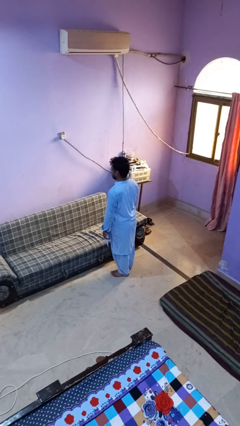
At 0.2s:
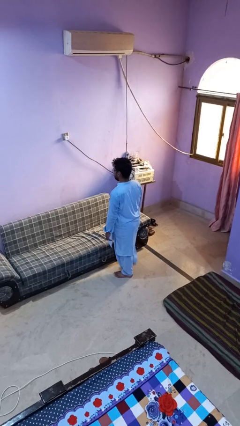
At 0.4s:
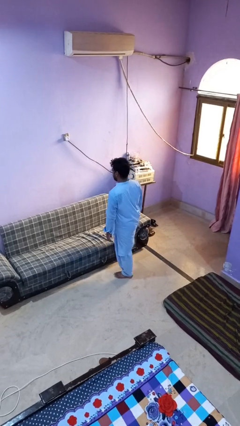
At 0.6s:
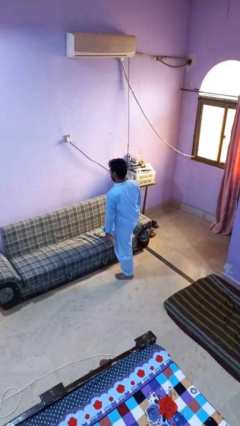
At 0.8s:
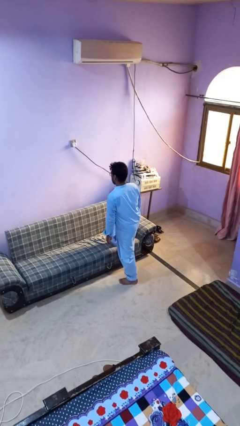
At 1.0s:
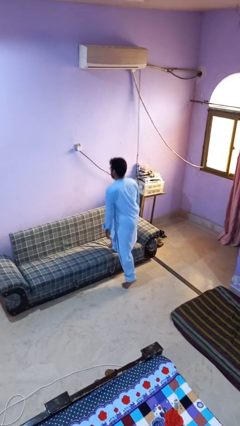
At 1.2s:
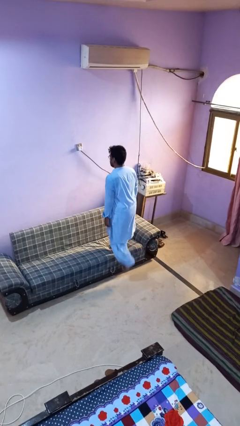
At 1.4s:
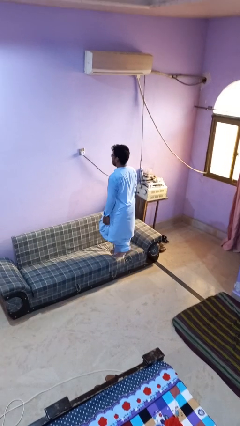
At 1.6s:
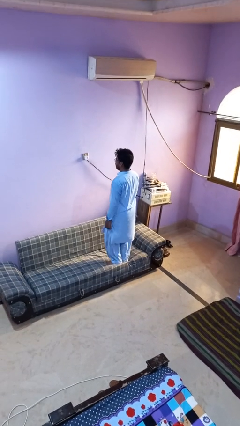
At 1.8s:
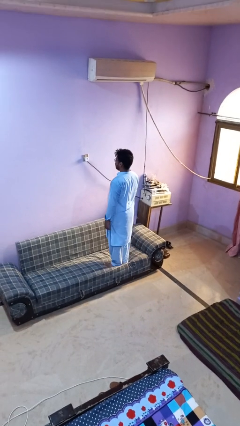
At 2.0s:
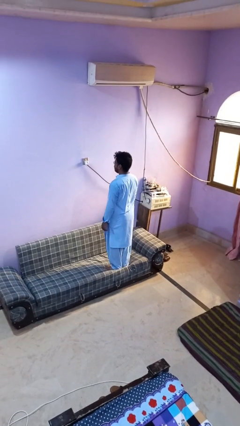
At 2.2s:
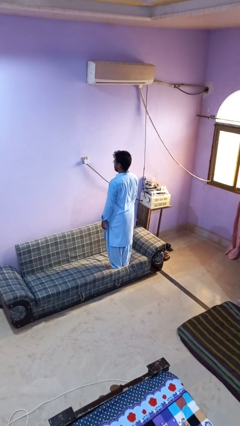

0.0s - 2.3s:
person climbs on couch

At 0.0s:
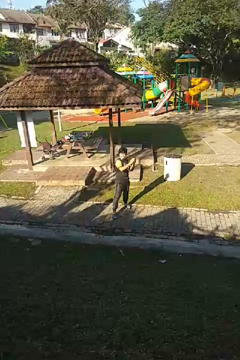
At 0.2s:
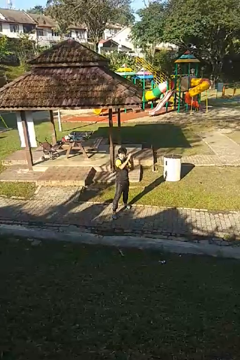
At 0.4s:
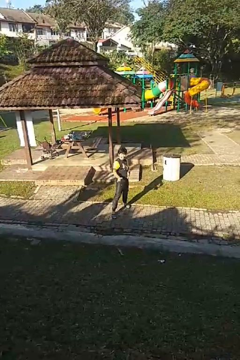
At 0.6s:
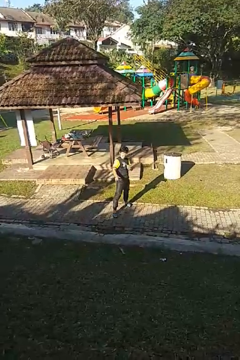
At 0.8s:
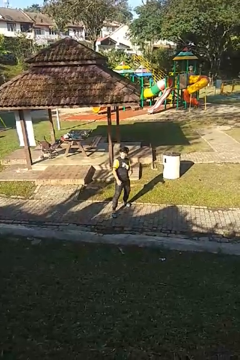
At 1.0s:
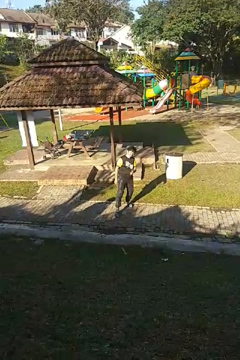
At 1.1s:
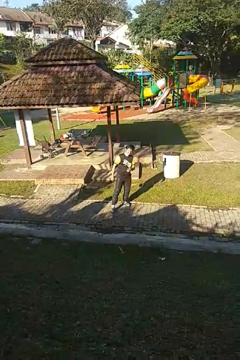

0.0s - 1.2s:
person karate chop

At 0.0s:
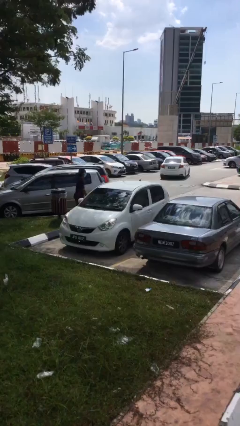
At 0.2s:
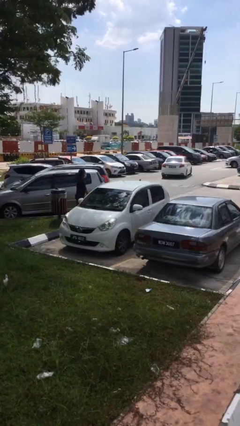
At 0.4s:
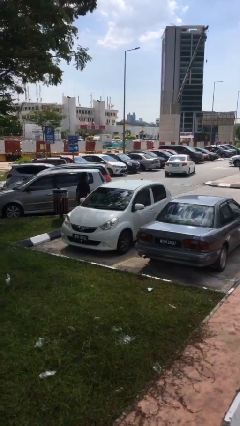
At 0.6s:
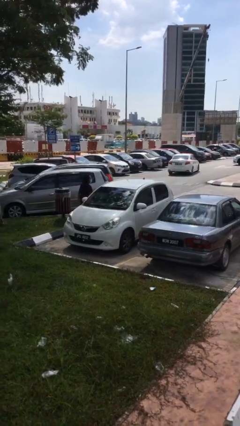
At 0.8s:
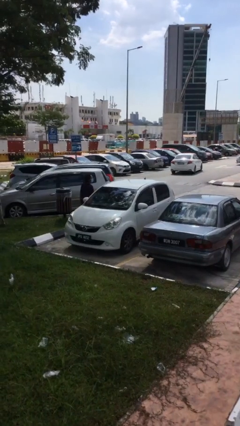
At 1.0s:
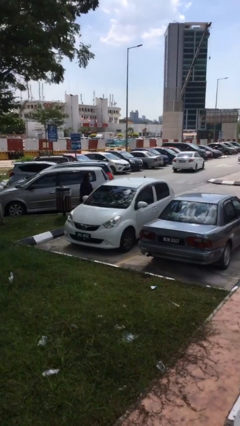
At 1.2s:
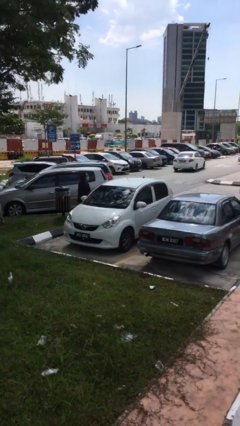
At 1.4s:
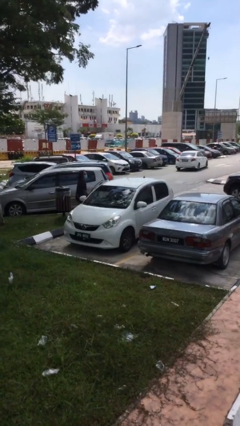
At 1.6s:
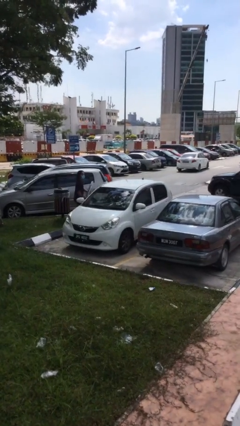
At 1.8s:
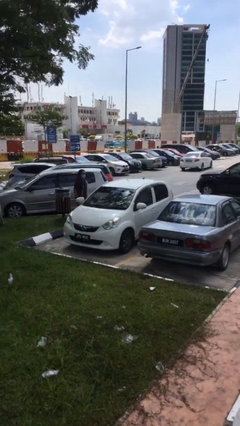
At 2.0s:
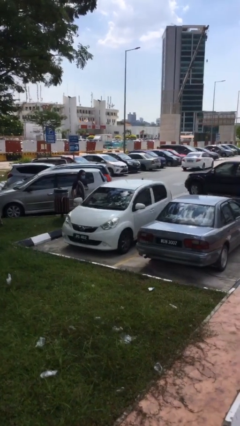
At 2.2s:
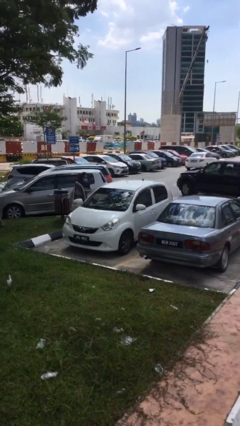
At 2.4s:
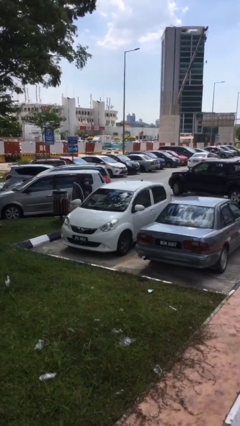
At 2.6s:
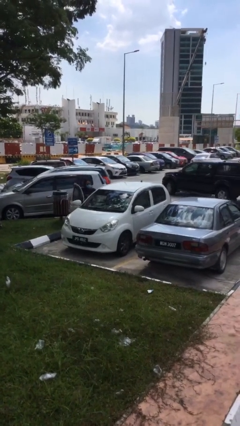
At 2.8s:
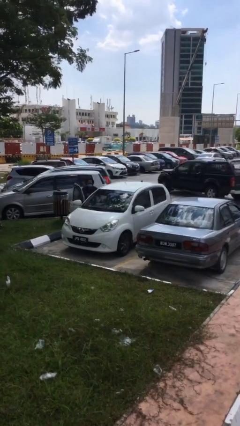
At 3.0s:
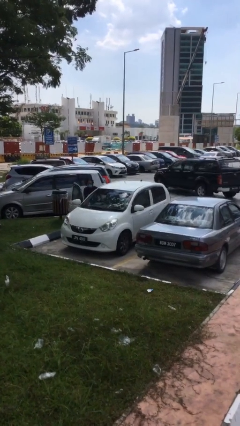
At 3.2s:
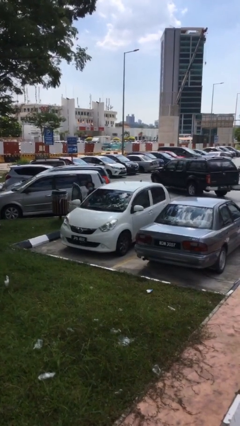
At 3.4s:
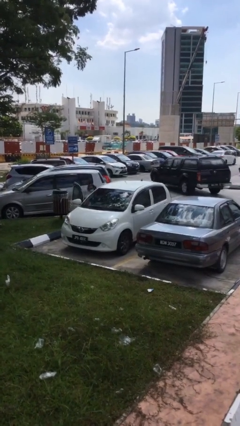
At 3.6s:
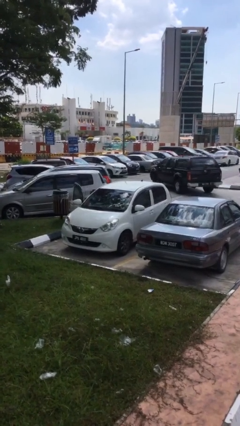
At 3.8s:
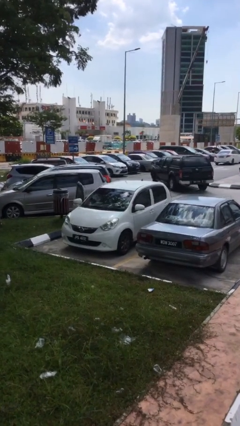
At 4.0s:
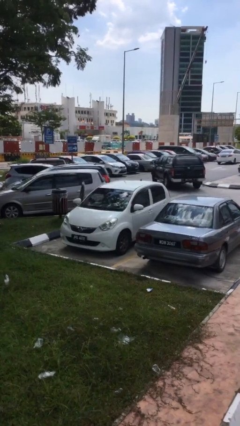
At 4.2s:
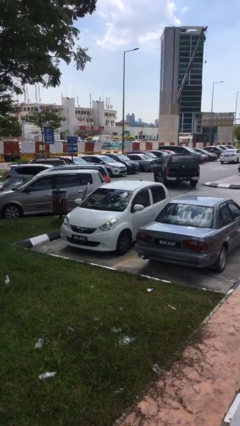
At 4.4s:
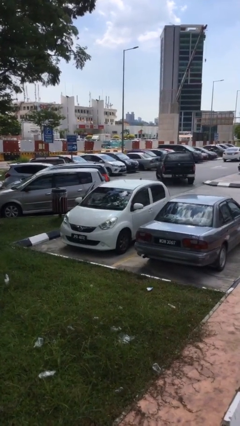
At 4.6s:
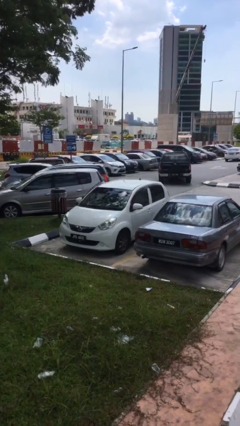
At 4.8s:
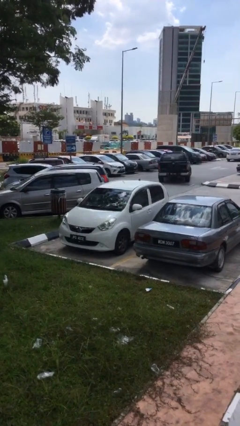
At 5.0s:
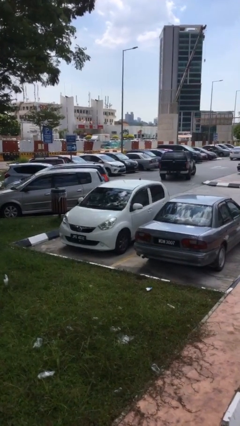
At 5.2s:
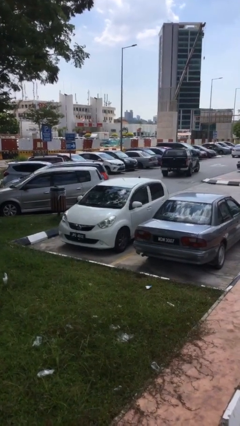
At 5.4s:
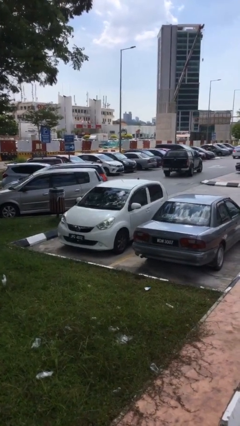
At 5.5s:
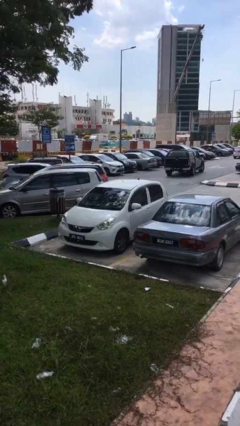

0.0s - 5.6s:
car picks up person

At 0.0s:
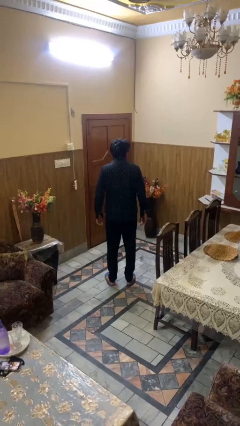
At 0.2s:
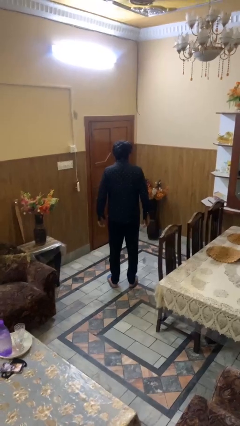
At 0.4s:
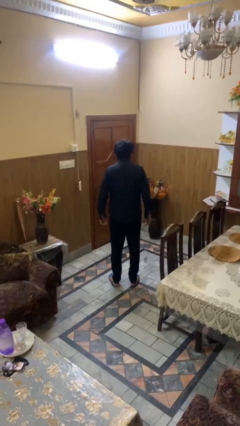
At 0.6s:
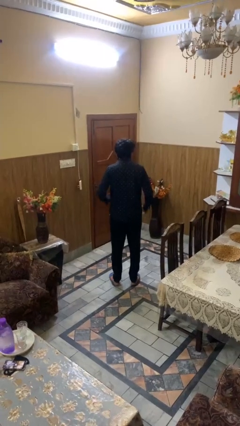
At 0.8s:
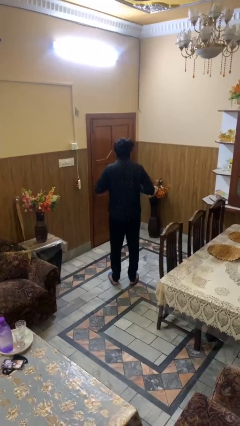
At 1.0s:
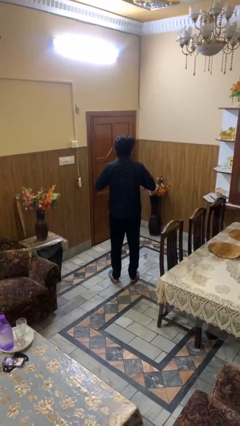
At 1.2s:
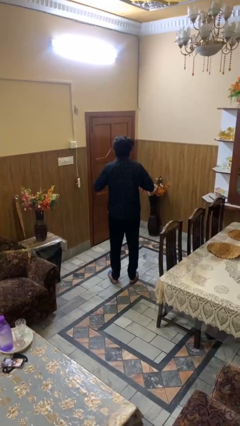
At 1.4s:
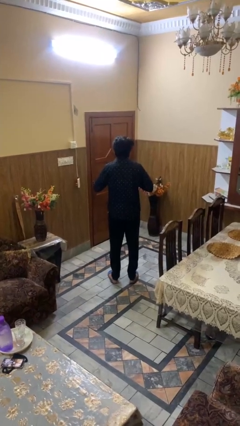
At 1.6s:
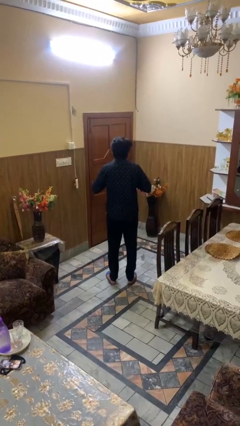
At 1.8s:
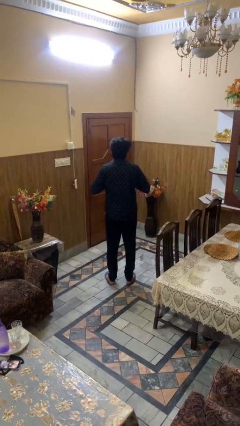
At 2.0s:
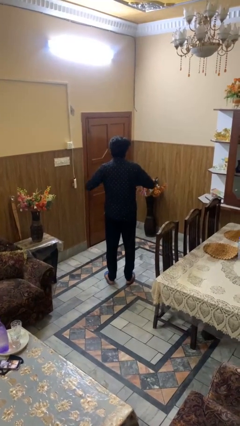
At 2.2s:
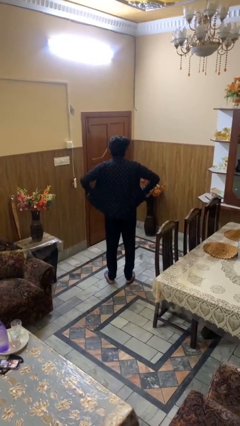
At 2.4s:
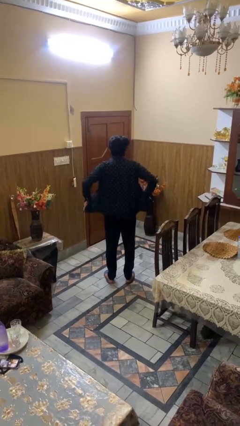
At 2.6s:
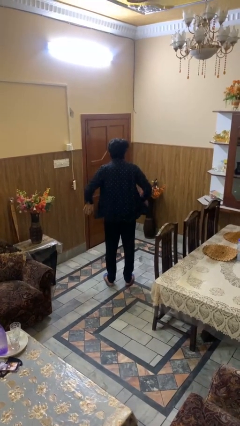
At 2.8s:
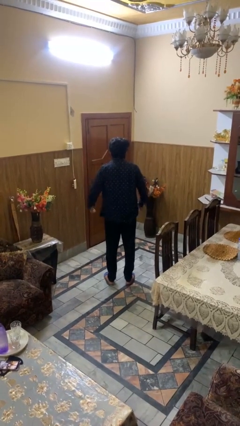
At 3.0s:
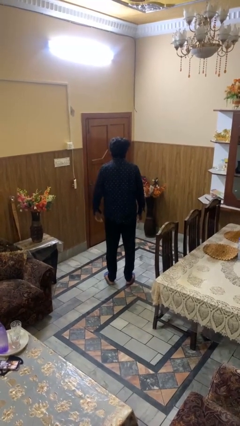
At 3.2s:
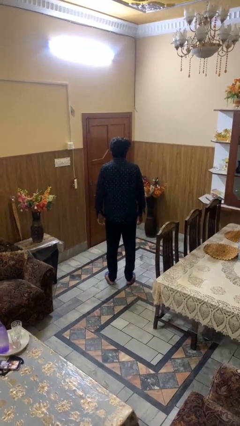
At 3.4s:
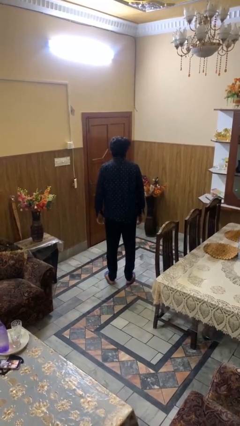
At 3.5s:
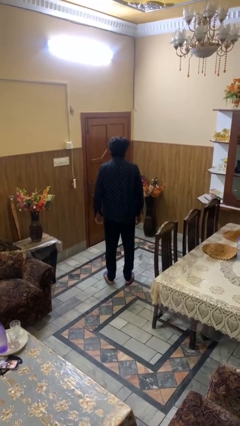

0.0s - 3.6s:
person unbuttons shirt

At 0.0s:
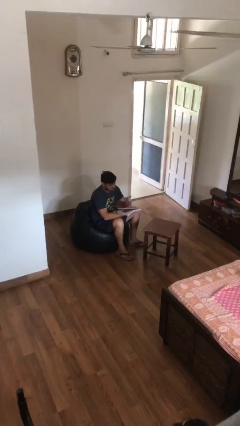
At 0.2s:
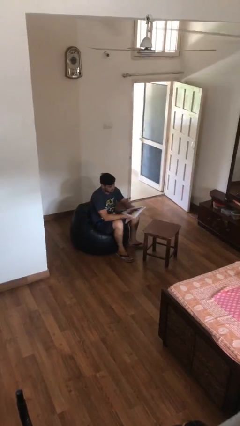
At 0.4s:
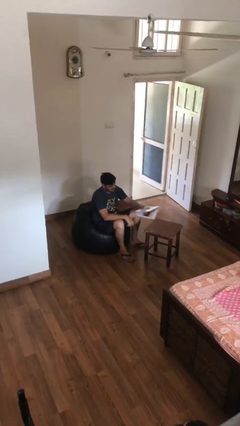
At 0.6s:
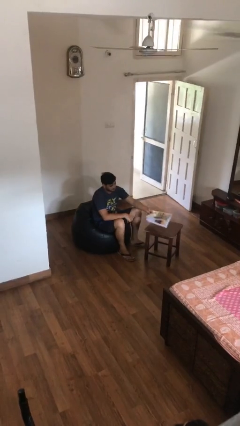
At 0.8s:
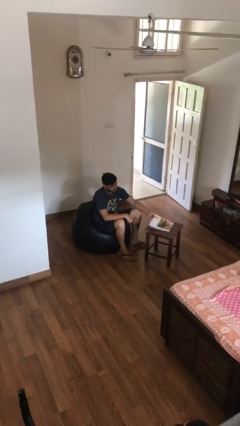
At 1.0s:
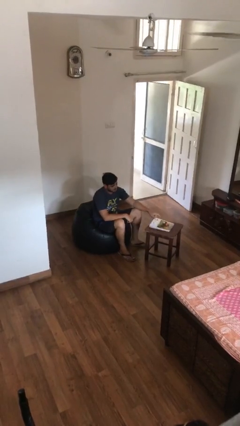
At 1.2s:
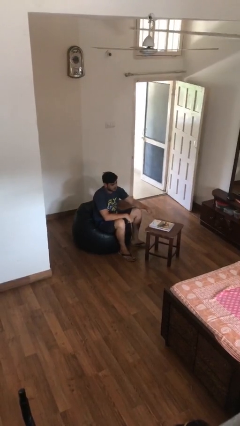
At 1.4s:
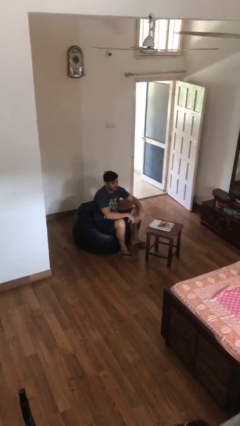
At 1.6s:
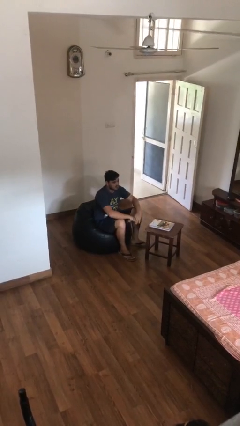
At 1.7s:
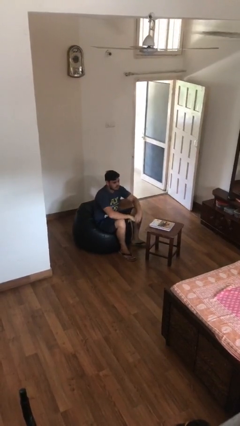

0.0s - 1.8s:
person puts down object on table

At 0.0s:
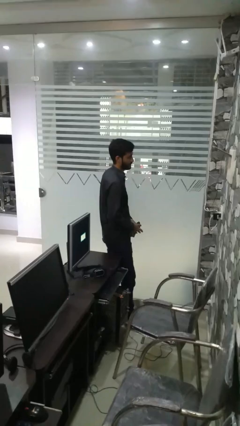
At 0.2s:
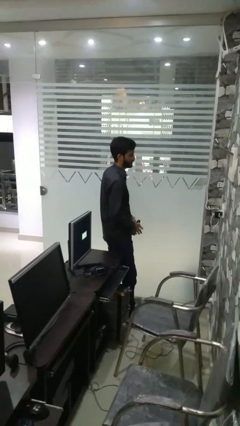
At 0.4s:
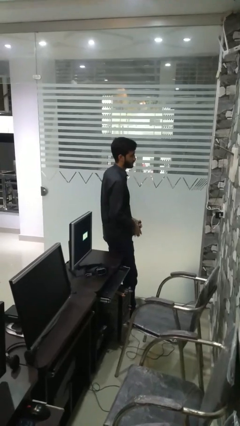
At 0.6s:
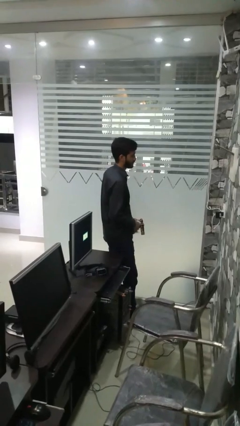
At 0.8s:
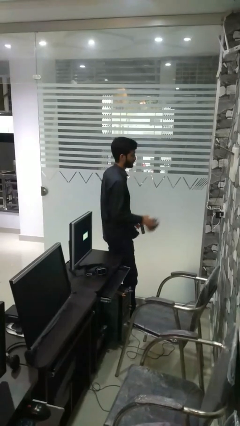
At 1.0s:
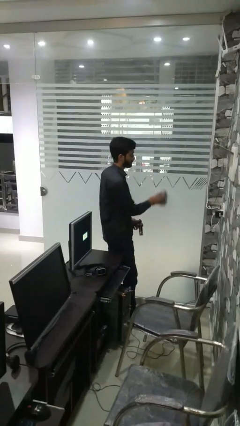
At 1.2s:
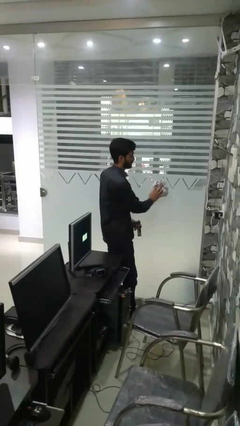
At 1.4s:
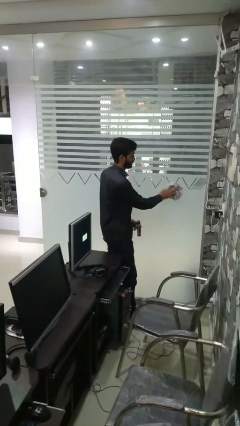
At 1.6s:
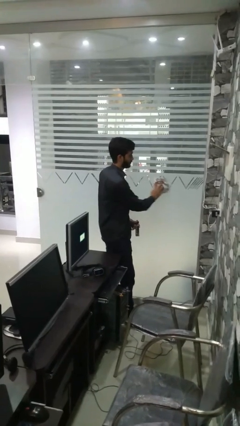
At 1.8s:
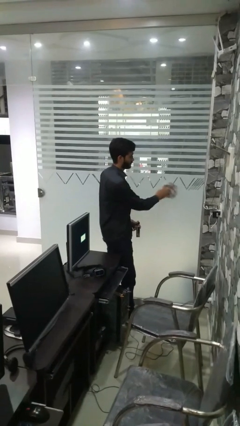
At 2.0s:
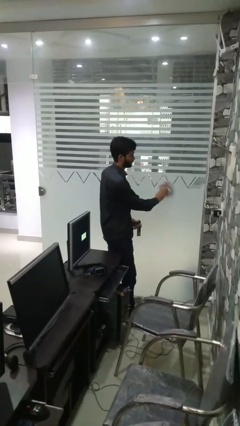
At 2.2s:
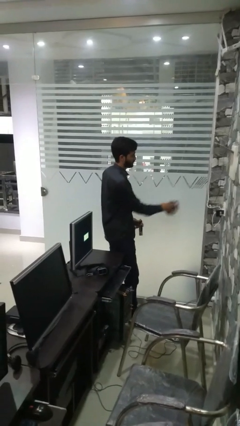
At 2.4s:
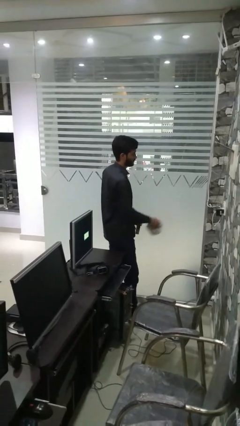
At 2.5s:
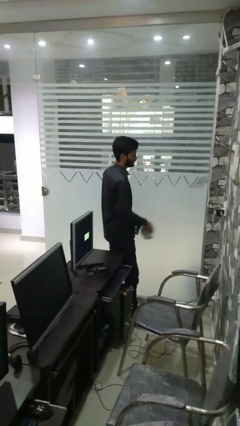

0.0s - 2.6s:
person washes window

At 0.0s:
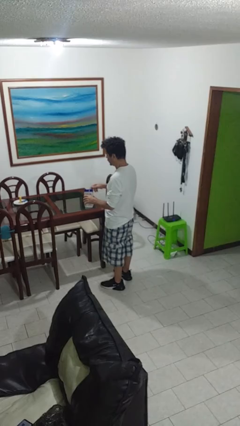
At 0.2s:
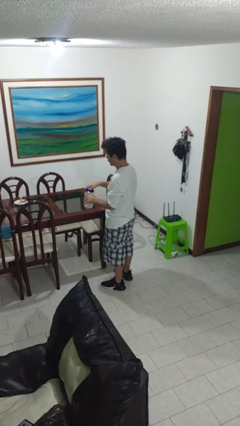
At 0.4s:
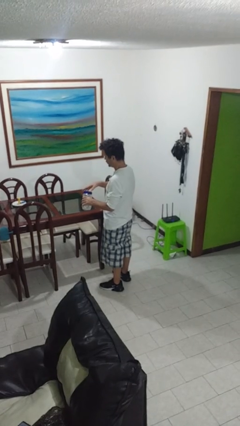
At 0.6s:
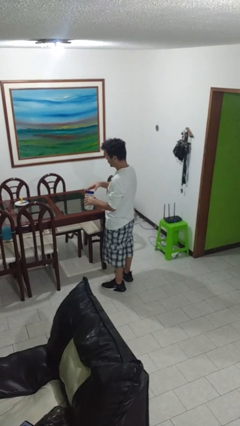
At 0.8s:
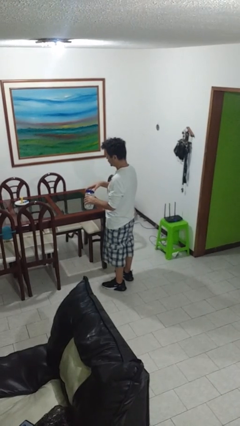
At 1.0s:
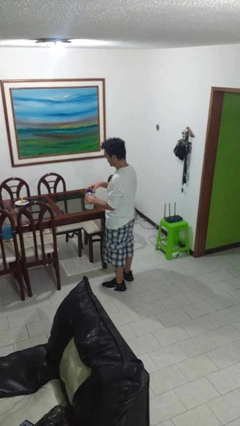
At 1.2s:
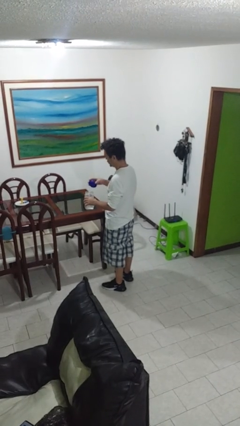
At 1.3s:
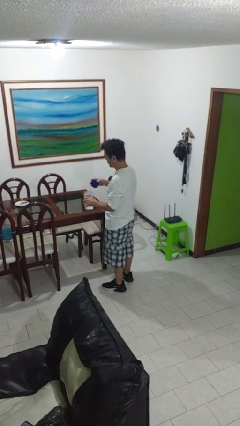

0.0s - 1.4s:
person opens jar
